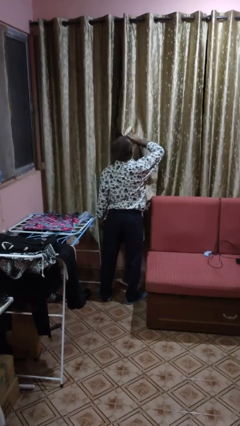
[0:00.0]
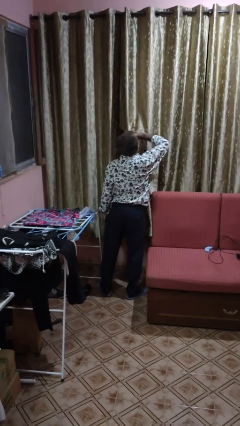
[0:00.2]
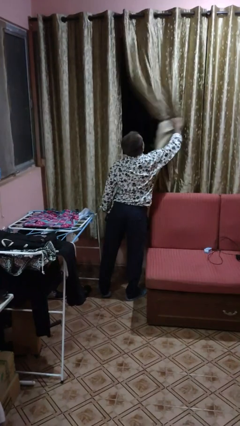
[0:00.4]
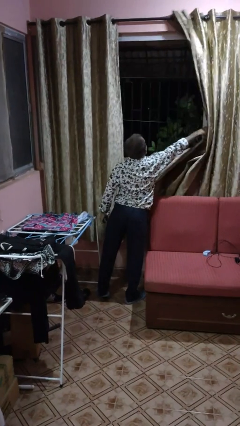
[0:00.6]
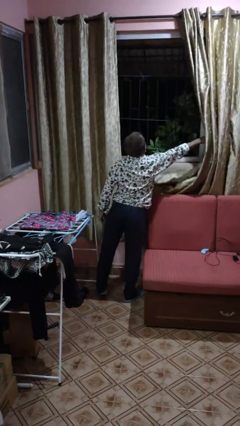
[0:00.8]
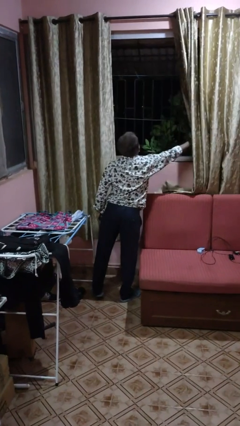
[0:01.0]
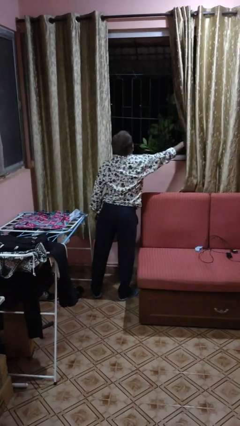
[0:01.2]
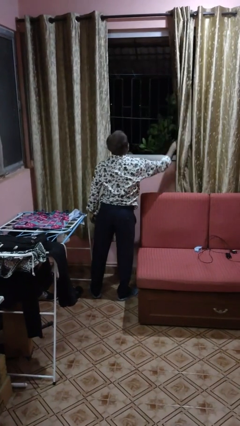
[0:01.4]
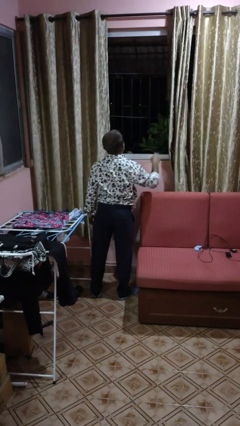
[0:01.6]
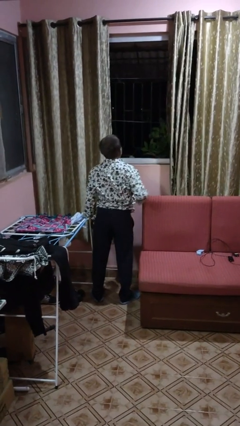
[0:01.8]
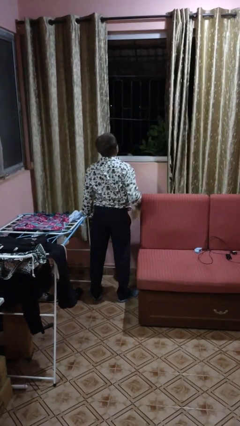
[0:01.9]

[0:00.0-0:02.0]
person opens curtains

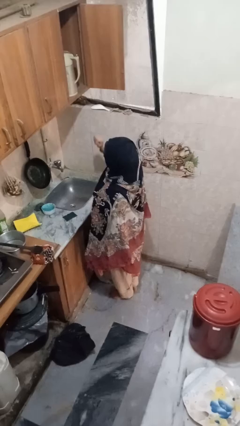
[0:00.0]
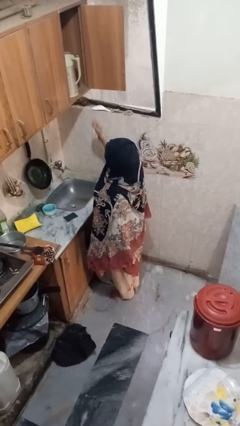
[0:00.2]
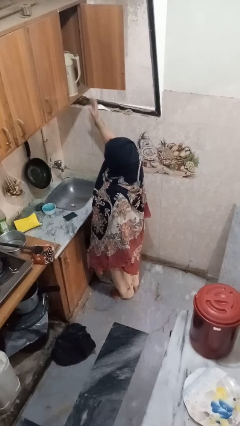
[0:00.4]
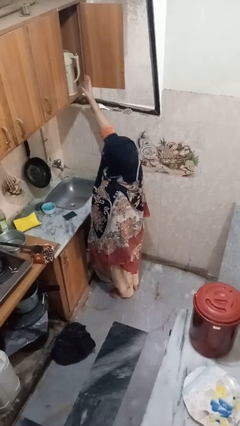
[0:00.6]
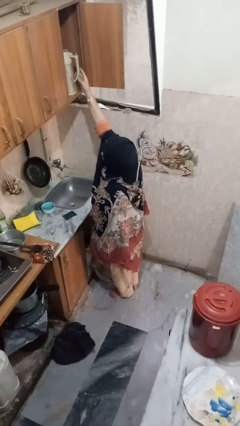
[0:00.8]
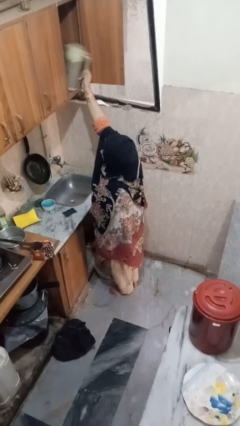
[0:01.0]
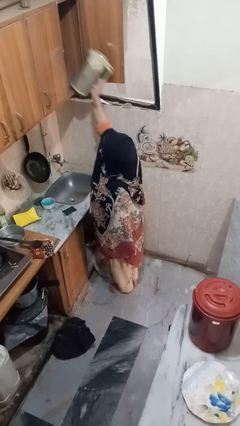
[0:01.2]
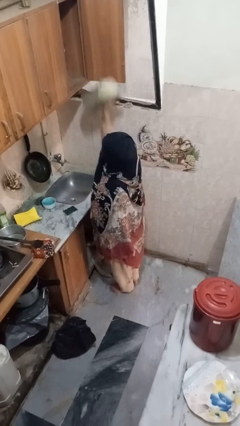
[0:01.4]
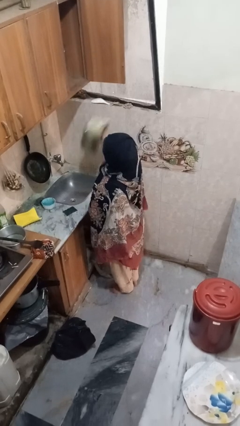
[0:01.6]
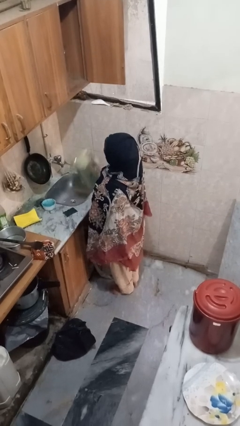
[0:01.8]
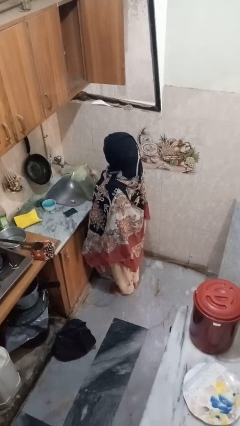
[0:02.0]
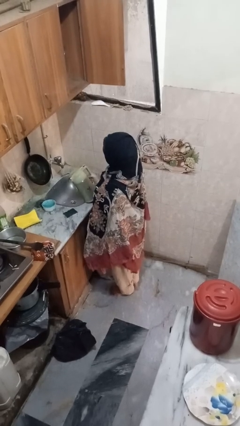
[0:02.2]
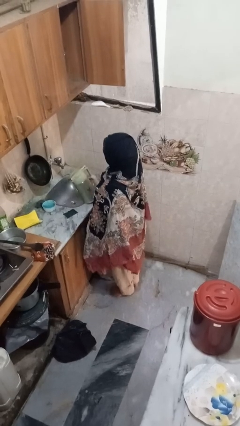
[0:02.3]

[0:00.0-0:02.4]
person puts object in cabinet

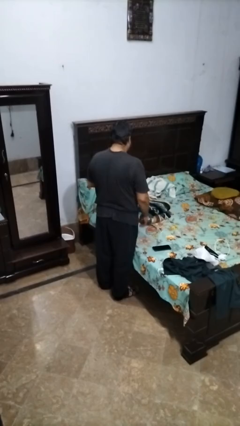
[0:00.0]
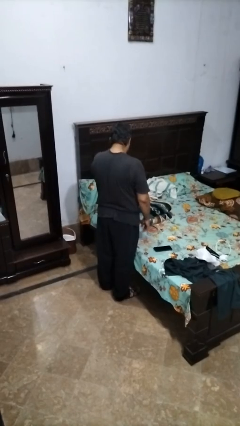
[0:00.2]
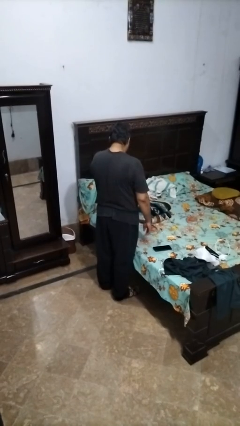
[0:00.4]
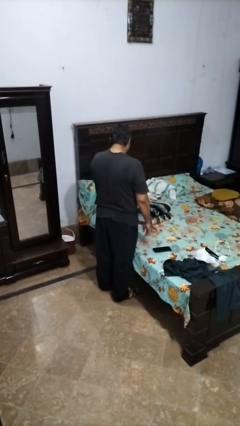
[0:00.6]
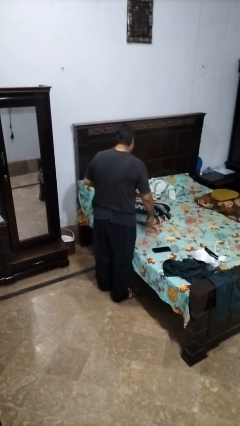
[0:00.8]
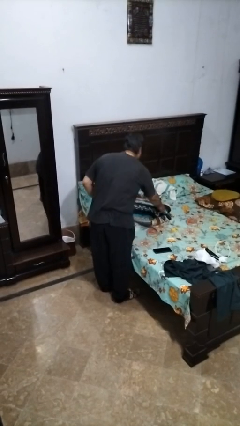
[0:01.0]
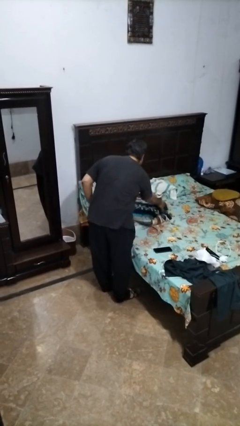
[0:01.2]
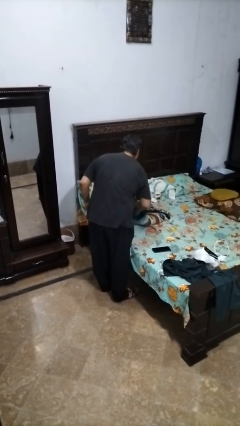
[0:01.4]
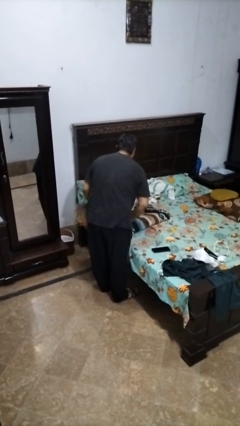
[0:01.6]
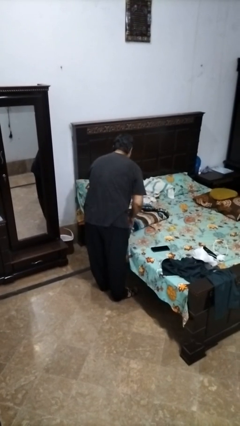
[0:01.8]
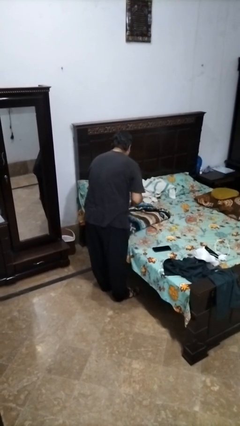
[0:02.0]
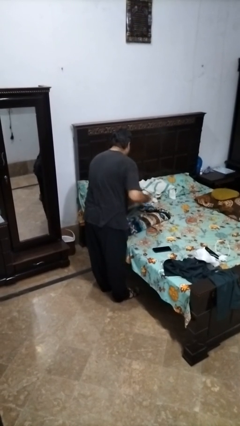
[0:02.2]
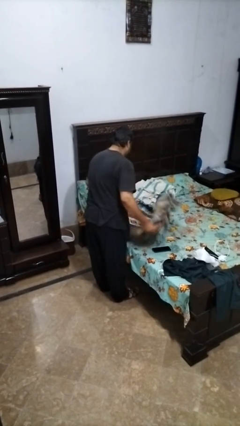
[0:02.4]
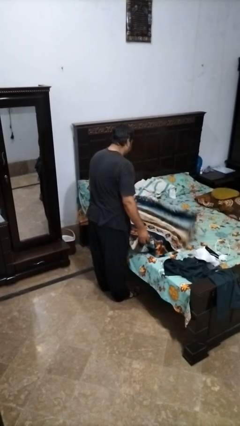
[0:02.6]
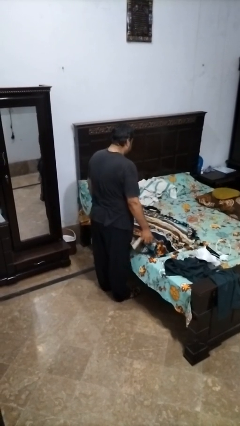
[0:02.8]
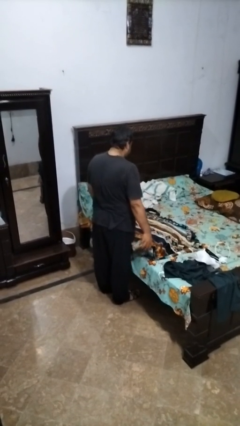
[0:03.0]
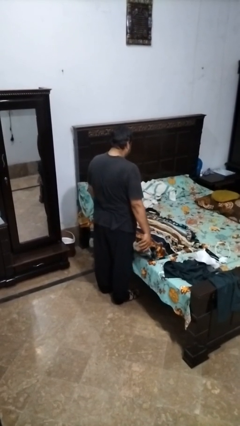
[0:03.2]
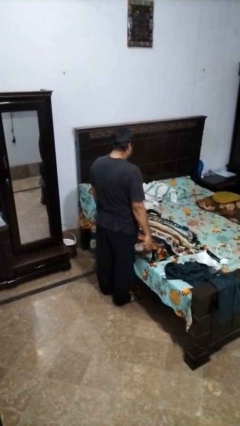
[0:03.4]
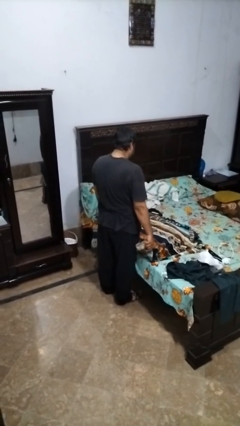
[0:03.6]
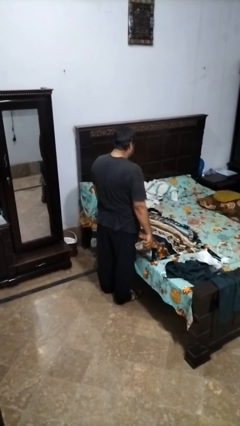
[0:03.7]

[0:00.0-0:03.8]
person unfolds blanket

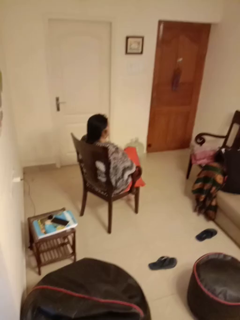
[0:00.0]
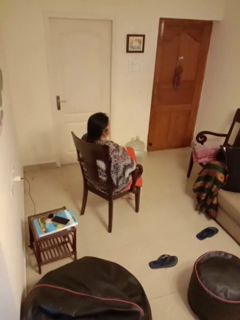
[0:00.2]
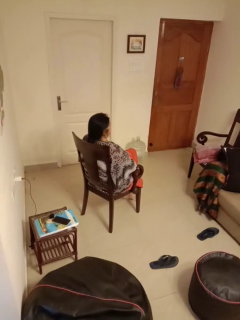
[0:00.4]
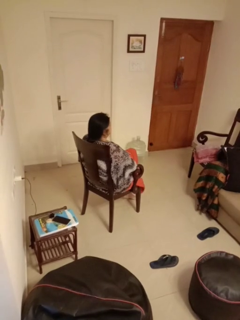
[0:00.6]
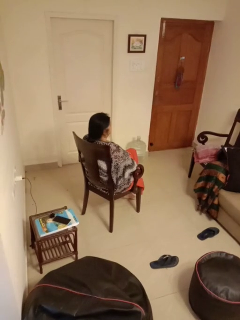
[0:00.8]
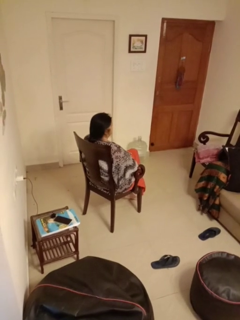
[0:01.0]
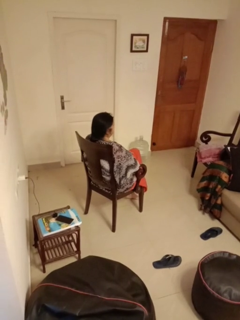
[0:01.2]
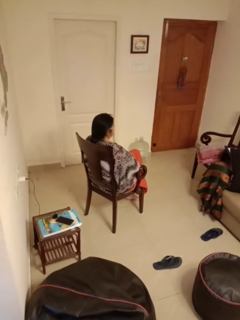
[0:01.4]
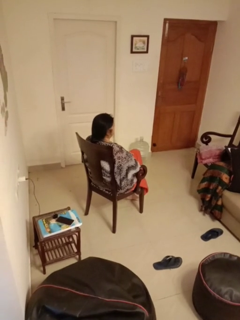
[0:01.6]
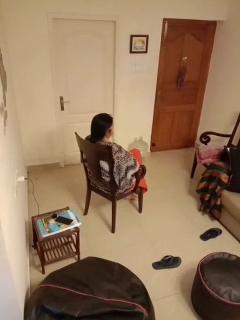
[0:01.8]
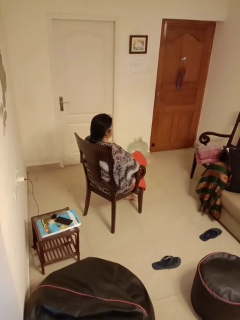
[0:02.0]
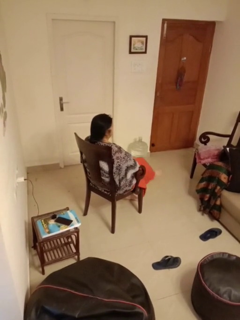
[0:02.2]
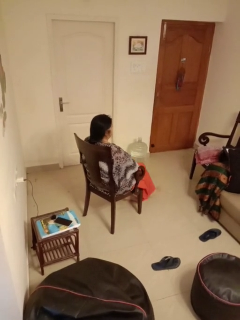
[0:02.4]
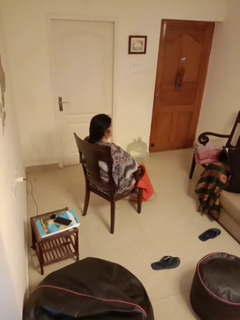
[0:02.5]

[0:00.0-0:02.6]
person crosses legs

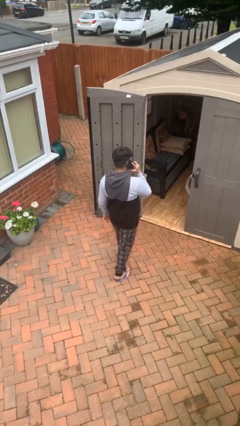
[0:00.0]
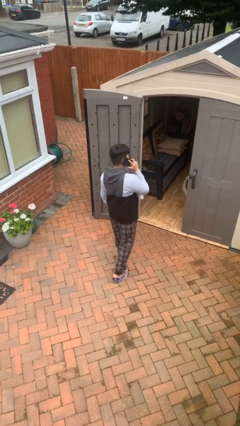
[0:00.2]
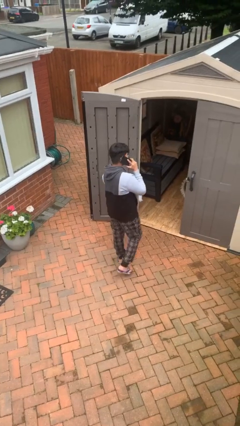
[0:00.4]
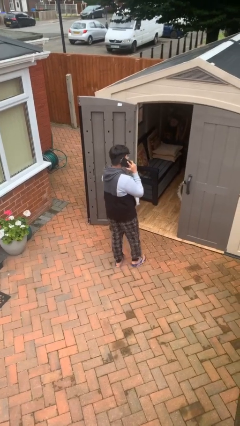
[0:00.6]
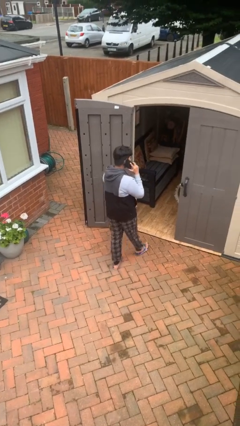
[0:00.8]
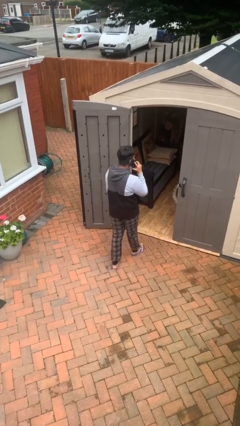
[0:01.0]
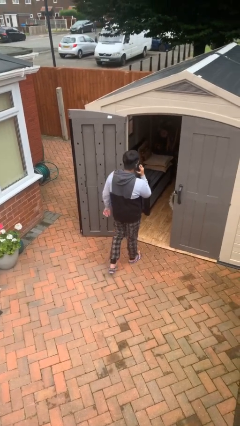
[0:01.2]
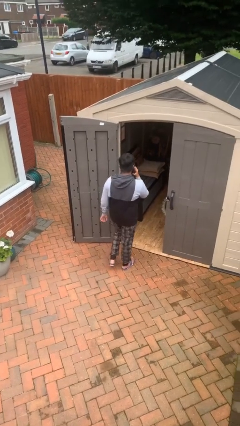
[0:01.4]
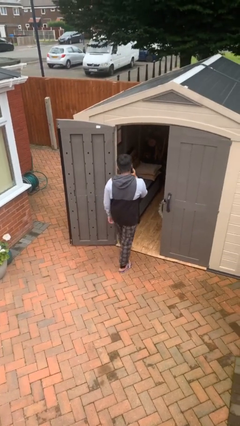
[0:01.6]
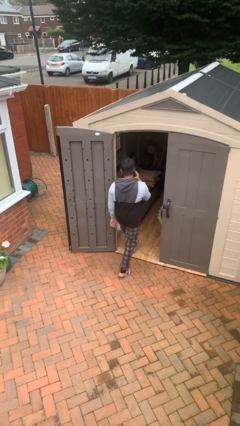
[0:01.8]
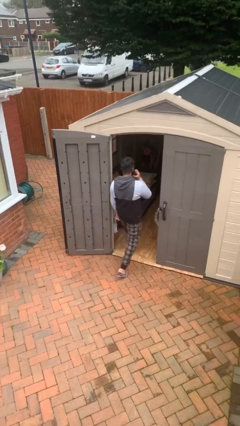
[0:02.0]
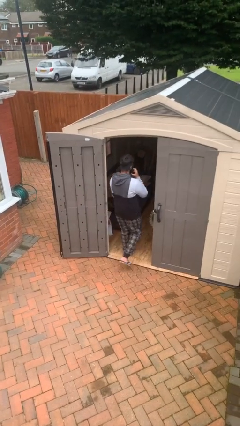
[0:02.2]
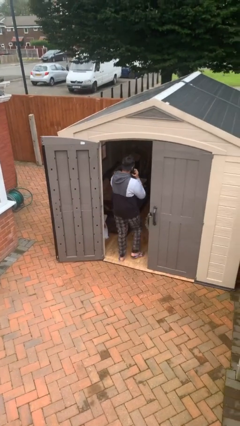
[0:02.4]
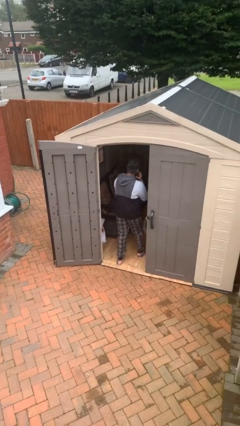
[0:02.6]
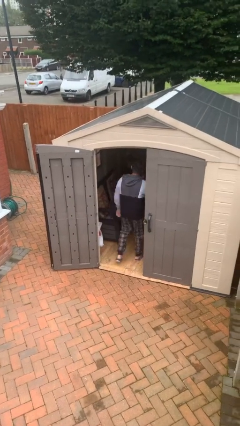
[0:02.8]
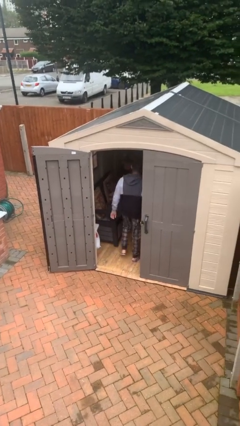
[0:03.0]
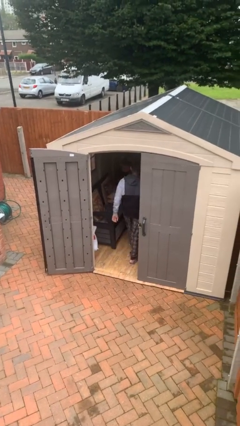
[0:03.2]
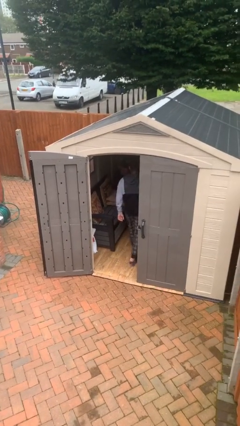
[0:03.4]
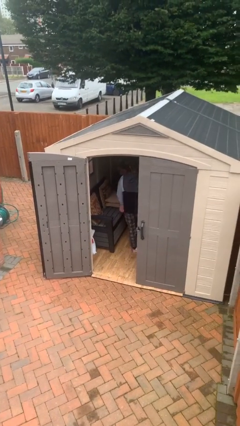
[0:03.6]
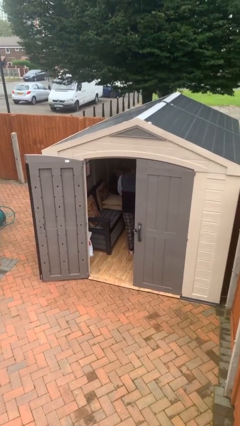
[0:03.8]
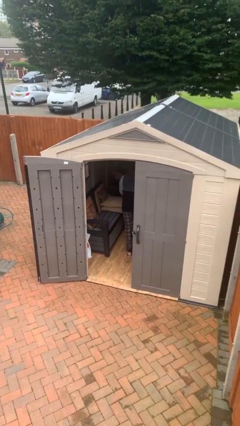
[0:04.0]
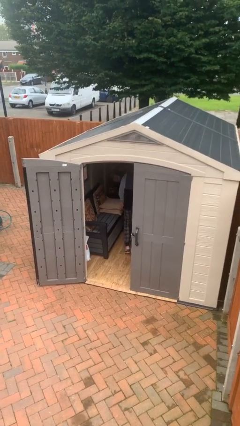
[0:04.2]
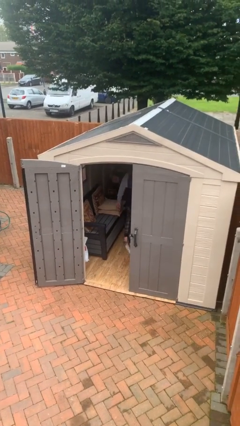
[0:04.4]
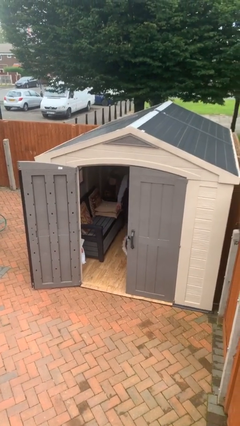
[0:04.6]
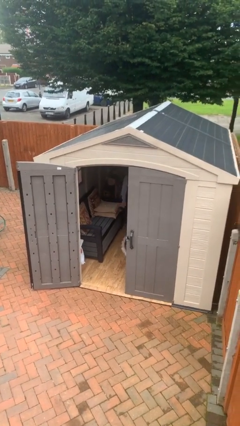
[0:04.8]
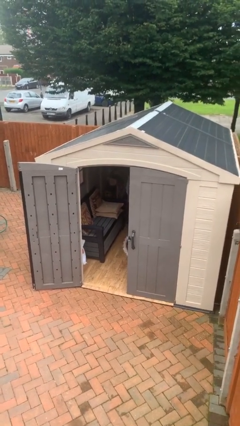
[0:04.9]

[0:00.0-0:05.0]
person exits scene through structure

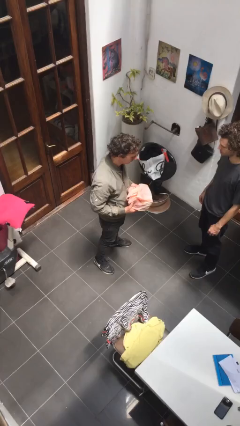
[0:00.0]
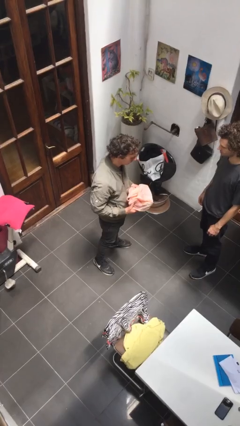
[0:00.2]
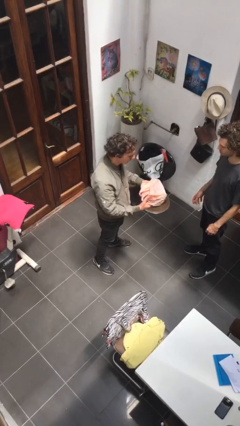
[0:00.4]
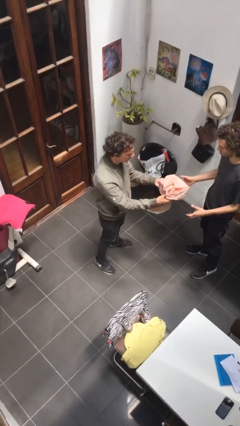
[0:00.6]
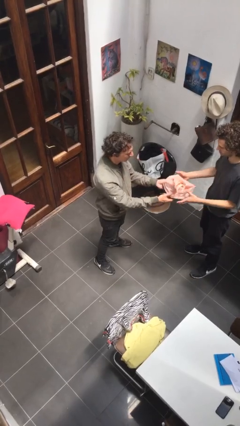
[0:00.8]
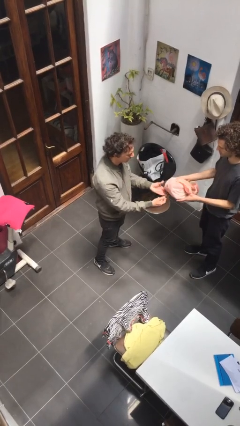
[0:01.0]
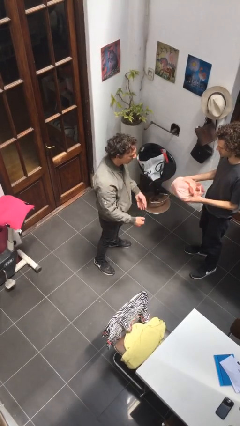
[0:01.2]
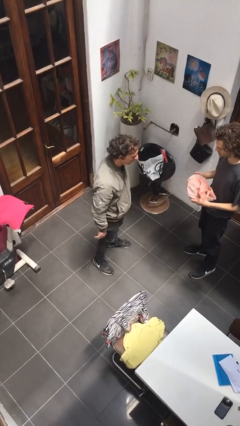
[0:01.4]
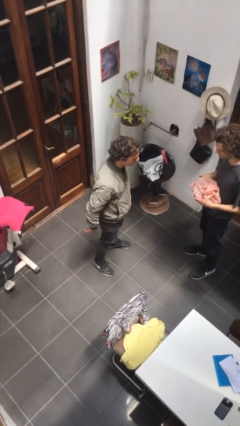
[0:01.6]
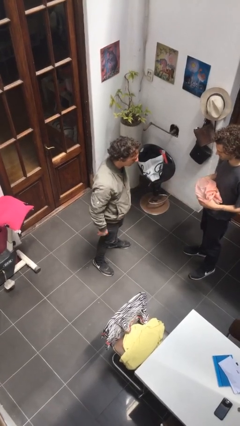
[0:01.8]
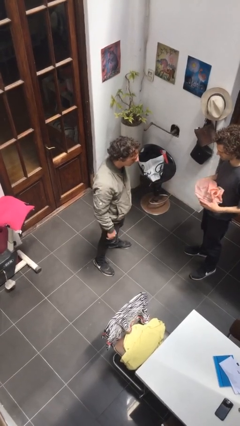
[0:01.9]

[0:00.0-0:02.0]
person transfers object to person
